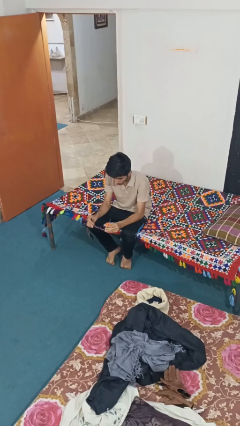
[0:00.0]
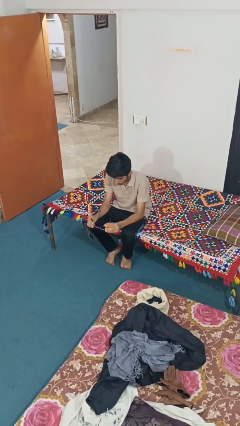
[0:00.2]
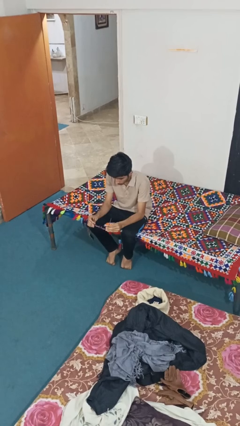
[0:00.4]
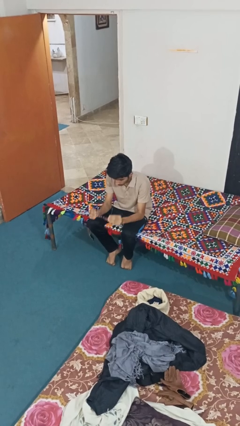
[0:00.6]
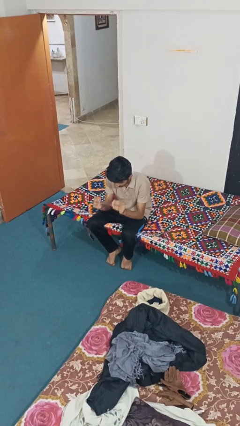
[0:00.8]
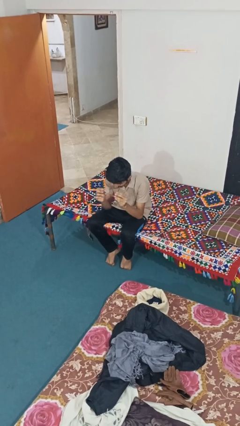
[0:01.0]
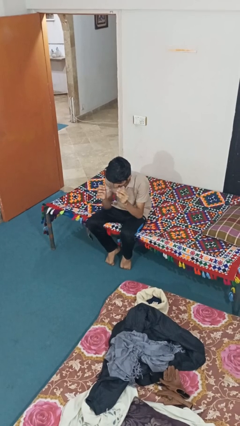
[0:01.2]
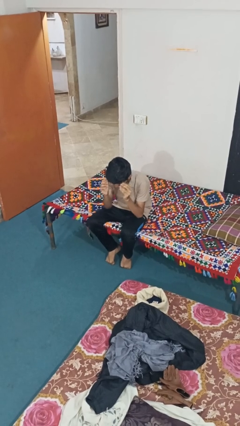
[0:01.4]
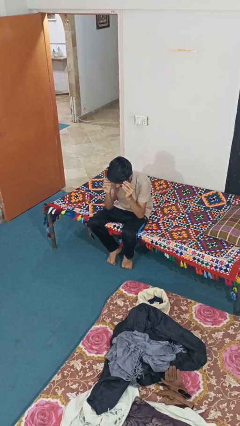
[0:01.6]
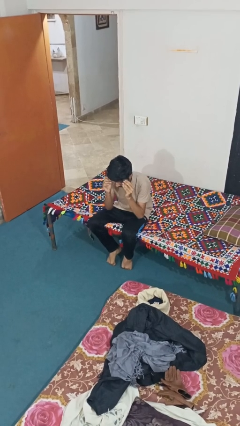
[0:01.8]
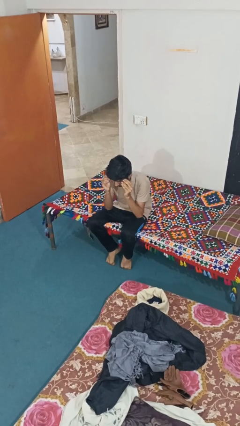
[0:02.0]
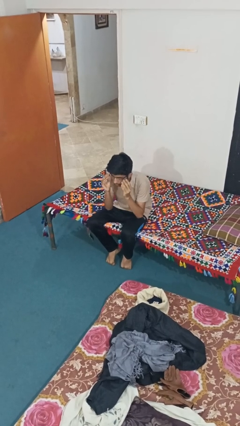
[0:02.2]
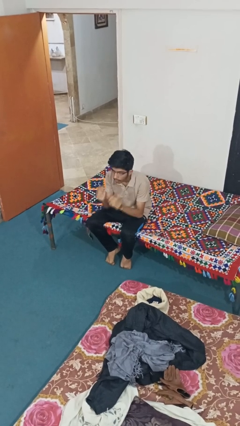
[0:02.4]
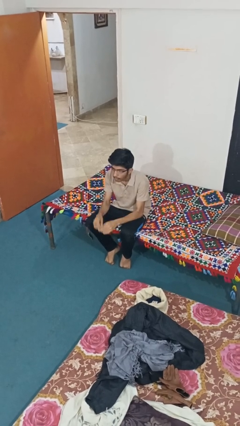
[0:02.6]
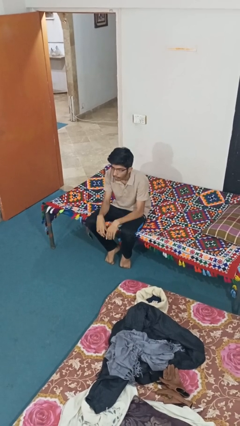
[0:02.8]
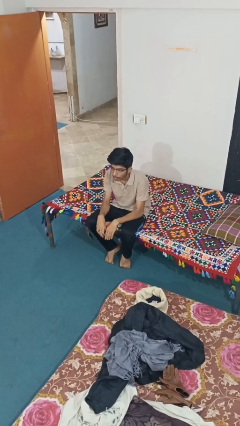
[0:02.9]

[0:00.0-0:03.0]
person puts on glasses

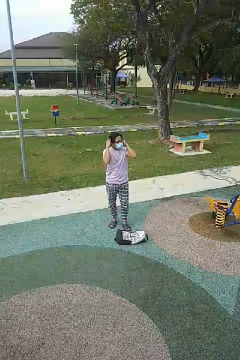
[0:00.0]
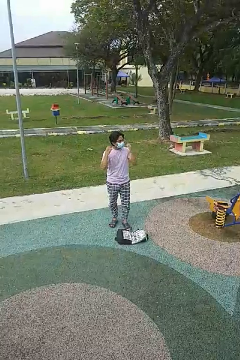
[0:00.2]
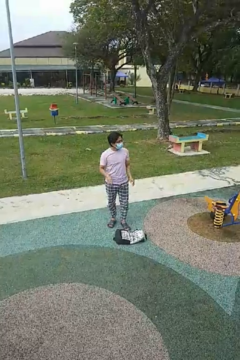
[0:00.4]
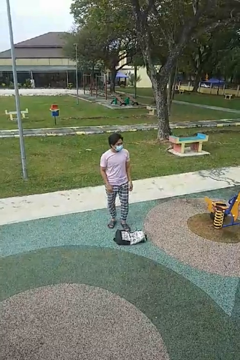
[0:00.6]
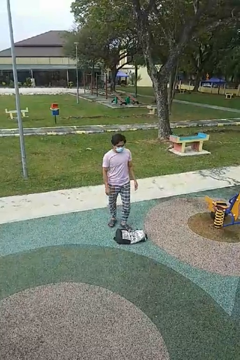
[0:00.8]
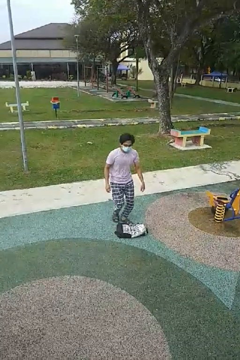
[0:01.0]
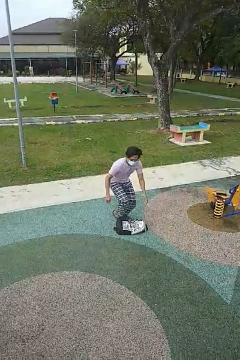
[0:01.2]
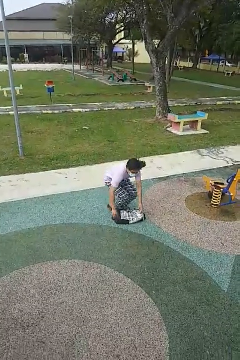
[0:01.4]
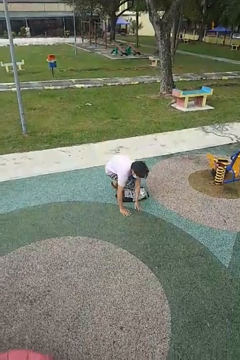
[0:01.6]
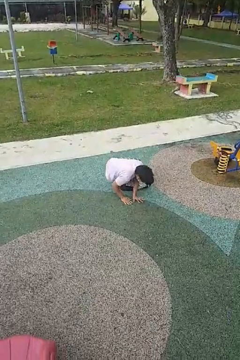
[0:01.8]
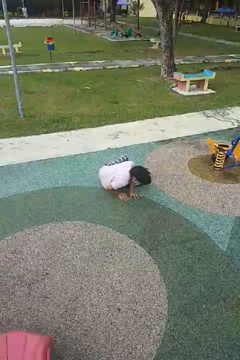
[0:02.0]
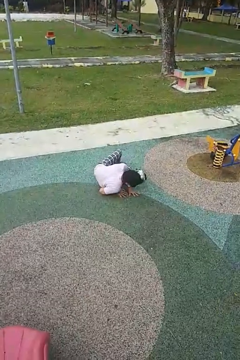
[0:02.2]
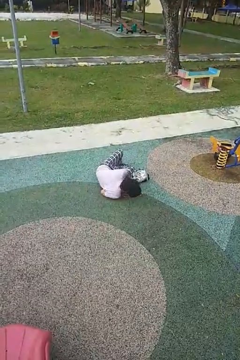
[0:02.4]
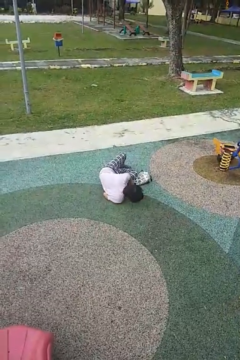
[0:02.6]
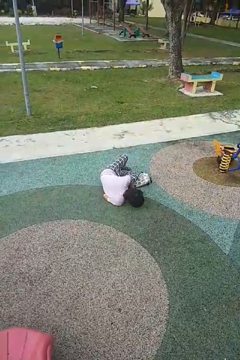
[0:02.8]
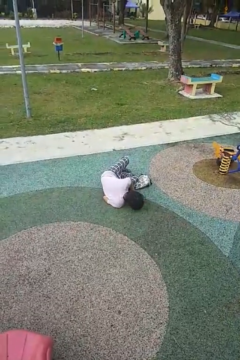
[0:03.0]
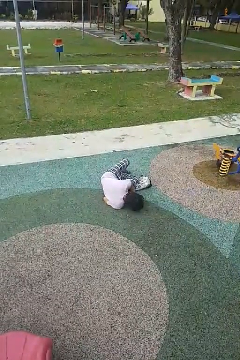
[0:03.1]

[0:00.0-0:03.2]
person trips on object on floor

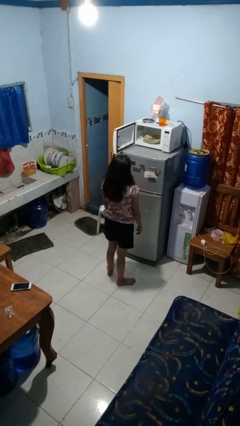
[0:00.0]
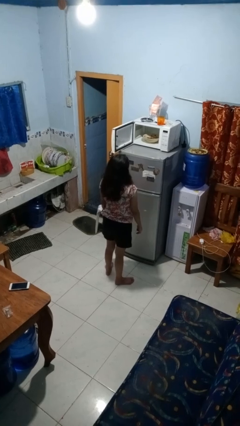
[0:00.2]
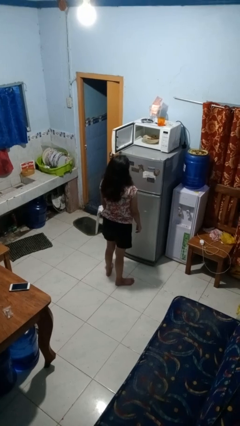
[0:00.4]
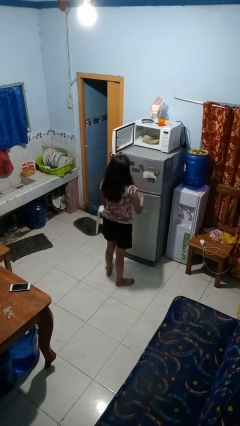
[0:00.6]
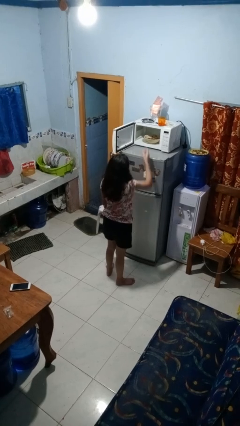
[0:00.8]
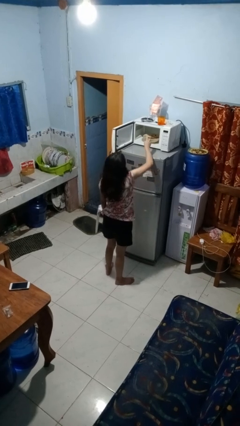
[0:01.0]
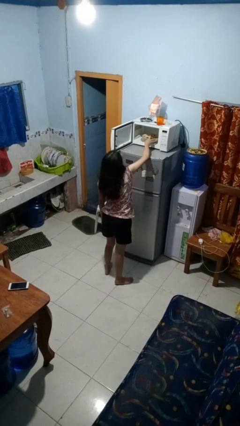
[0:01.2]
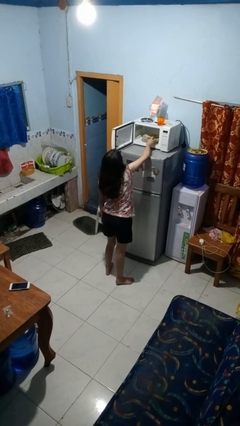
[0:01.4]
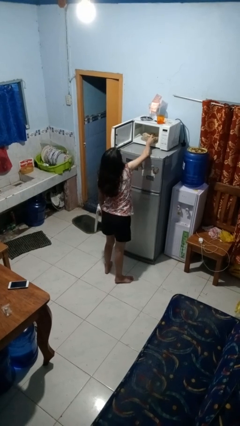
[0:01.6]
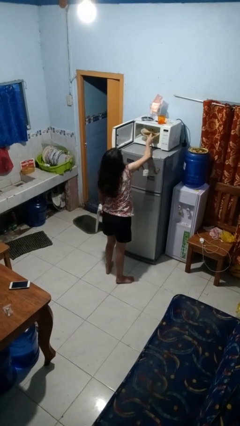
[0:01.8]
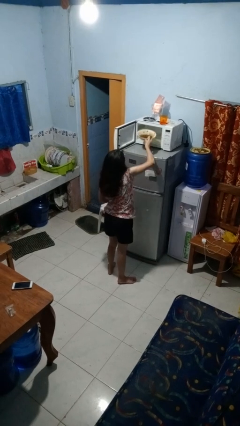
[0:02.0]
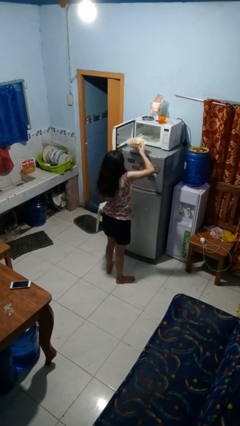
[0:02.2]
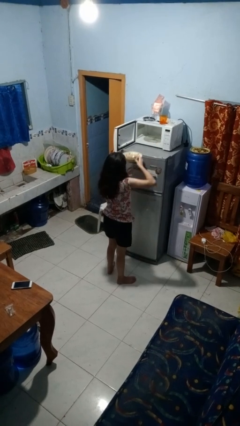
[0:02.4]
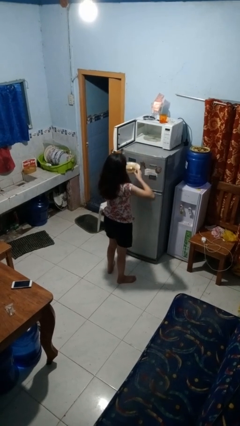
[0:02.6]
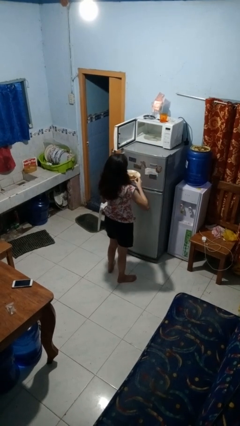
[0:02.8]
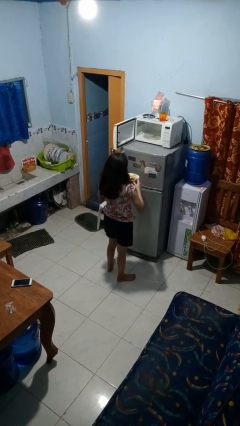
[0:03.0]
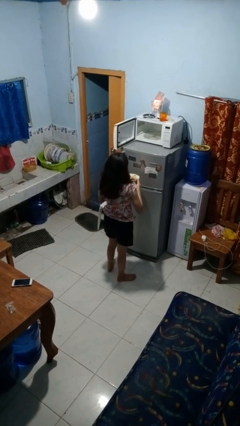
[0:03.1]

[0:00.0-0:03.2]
person takes object from microwave

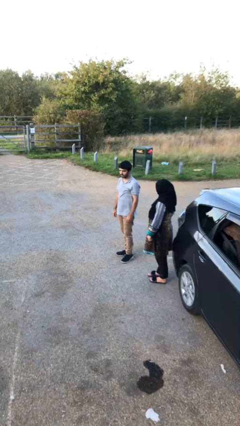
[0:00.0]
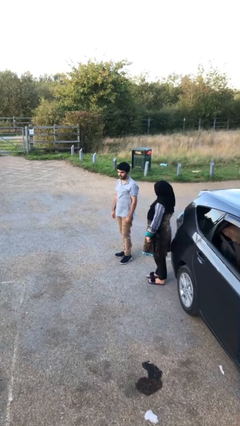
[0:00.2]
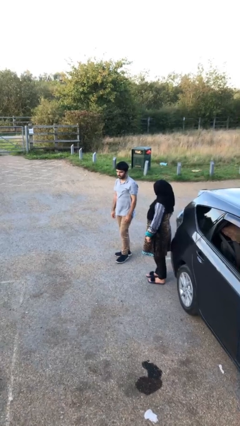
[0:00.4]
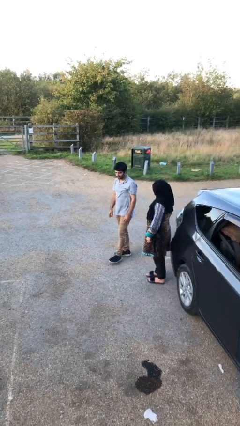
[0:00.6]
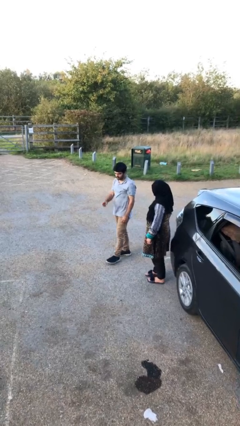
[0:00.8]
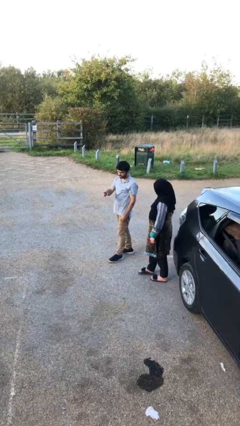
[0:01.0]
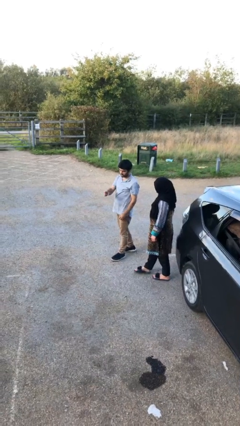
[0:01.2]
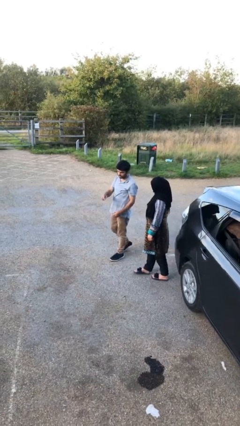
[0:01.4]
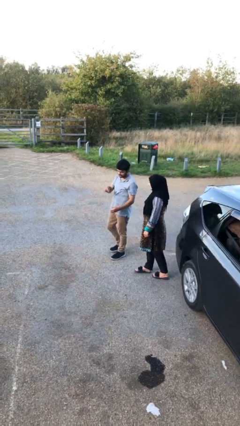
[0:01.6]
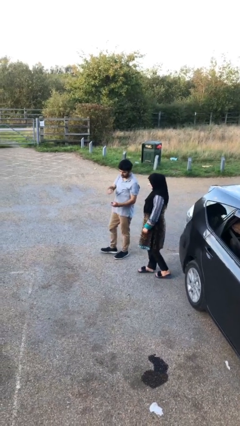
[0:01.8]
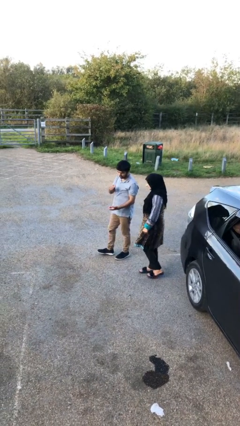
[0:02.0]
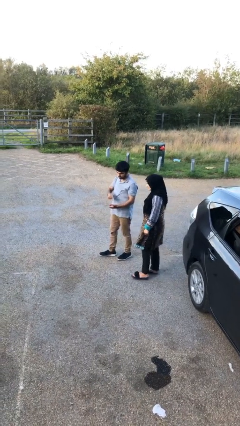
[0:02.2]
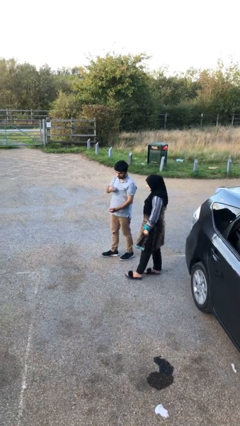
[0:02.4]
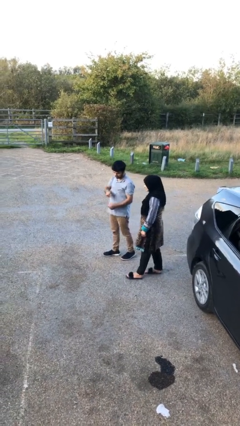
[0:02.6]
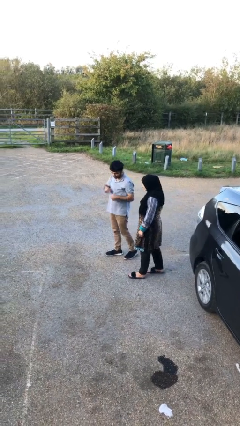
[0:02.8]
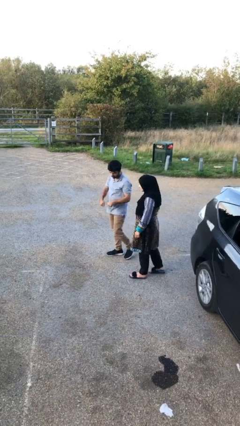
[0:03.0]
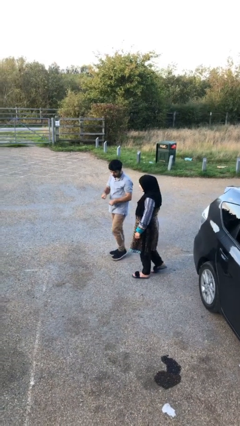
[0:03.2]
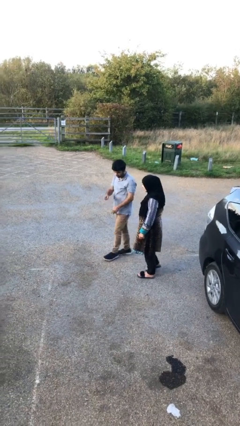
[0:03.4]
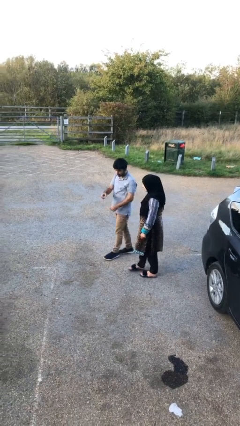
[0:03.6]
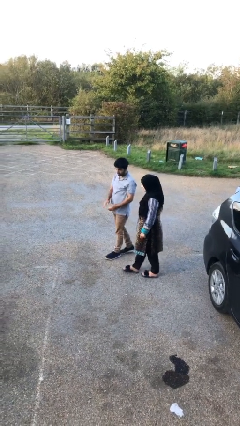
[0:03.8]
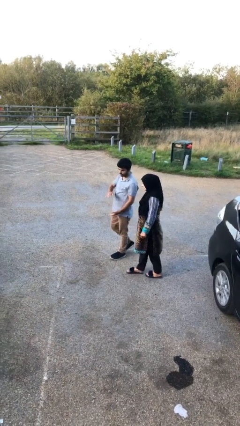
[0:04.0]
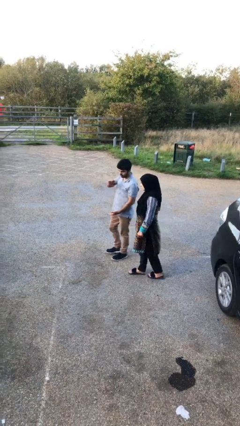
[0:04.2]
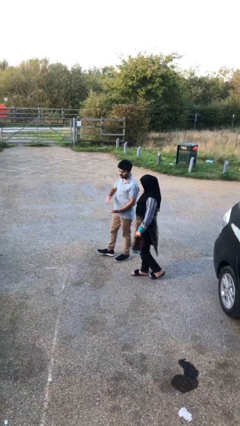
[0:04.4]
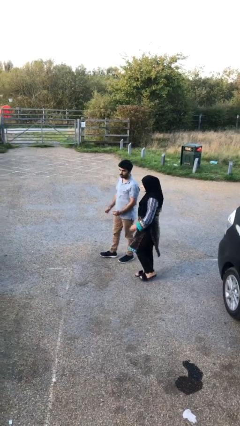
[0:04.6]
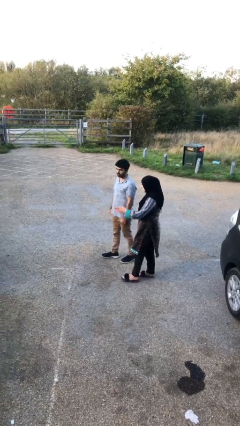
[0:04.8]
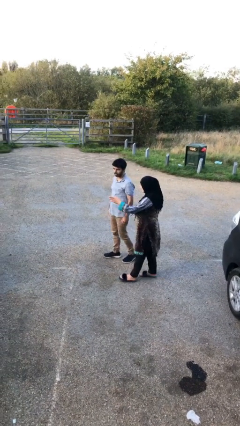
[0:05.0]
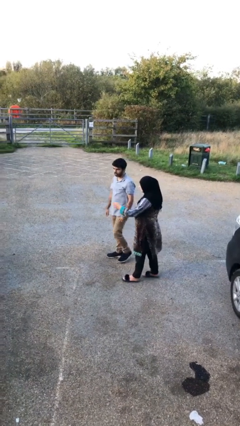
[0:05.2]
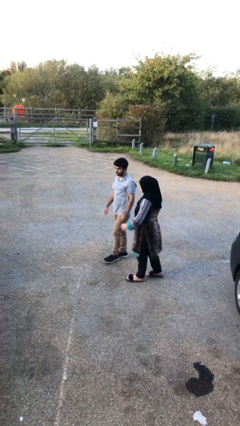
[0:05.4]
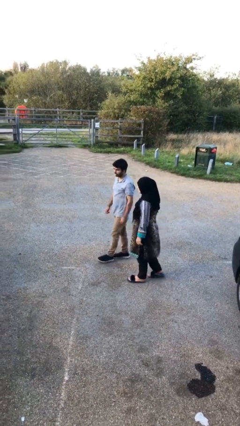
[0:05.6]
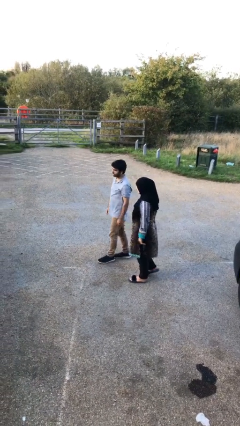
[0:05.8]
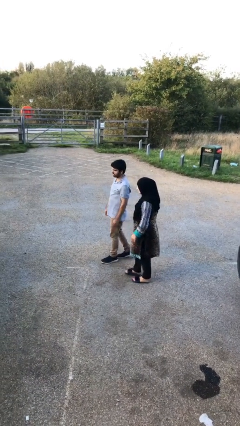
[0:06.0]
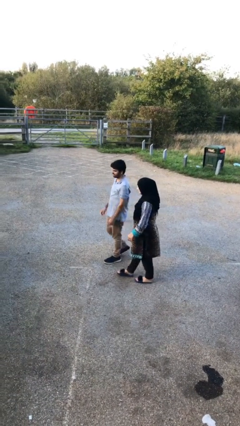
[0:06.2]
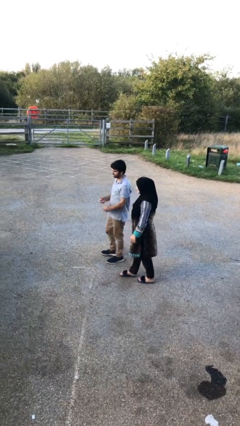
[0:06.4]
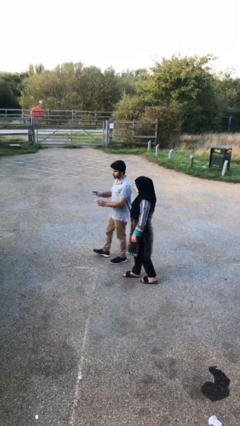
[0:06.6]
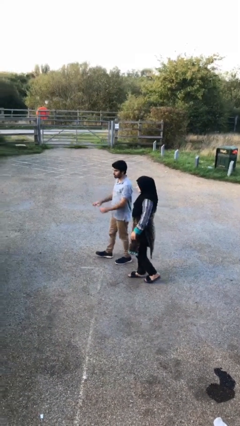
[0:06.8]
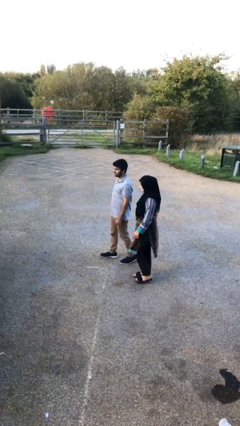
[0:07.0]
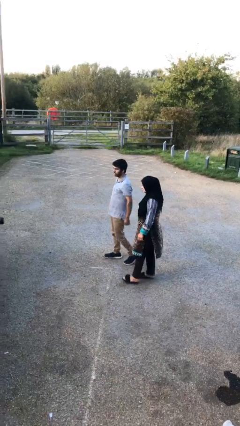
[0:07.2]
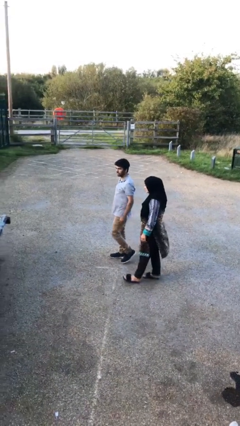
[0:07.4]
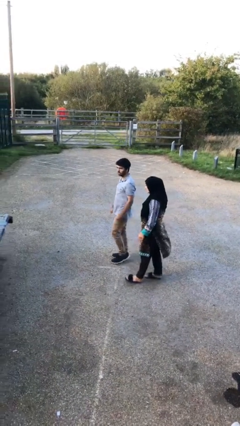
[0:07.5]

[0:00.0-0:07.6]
person talks to person

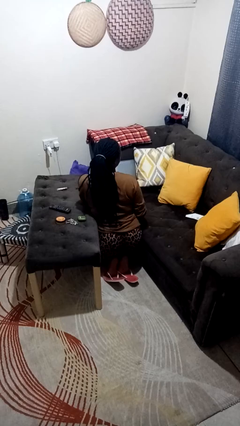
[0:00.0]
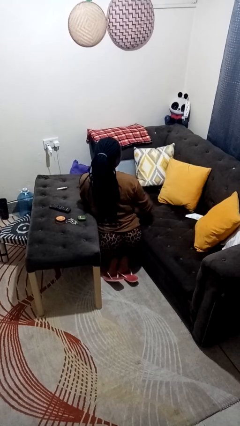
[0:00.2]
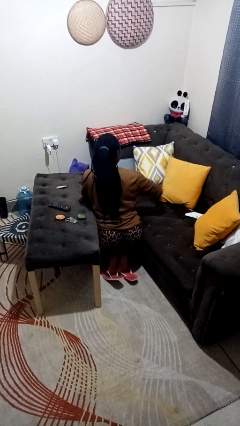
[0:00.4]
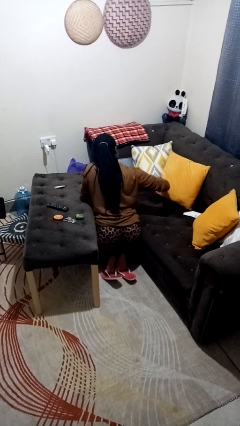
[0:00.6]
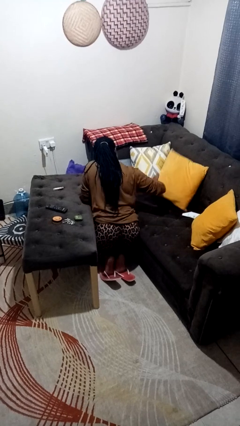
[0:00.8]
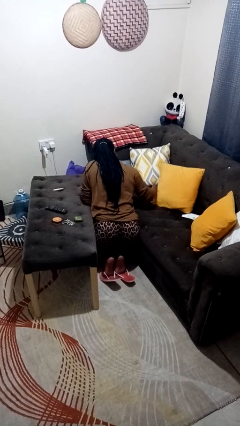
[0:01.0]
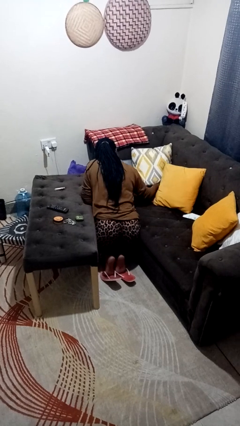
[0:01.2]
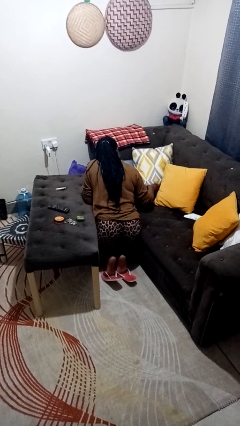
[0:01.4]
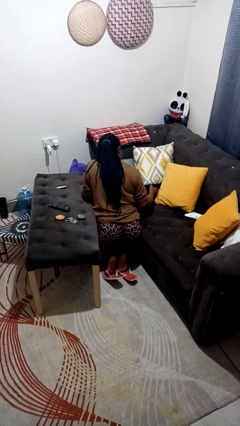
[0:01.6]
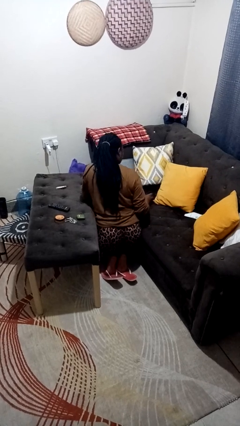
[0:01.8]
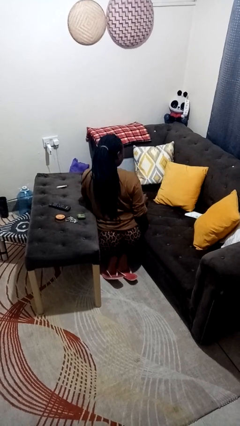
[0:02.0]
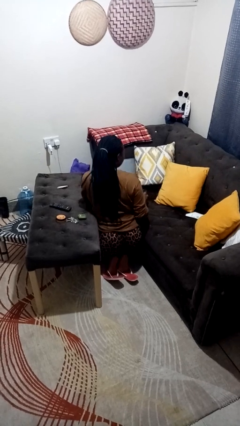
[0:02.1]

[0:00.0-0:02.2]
person searches in couch
